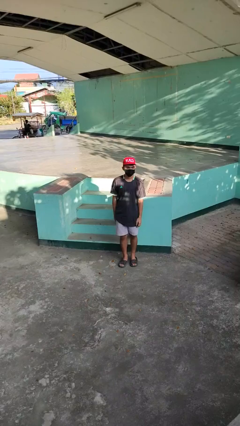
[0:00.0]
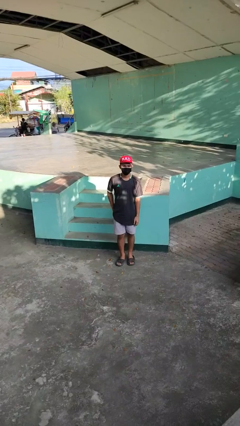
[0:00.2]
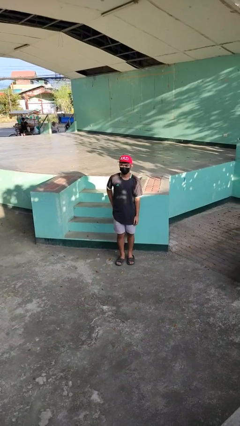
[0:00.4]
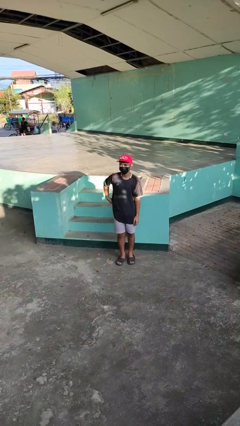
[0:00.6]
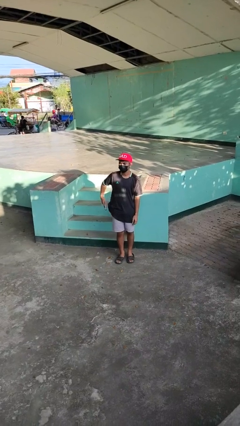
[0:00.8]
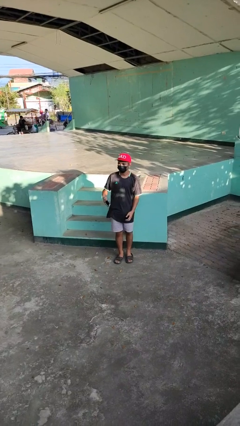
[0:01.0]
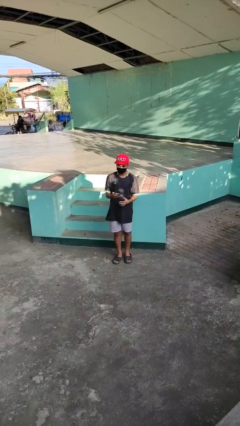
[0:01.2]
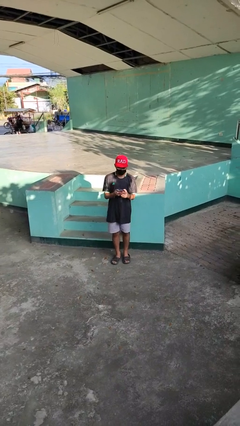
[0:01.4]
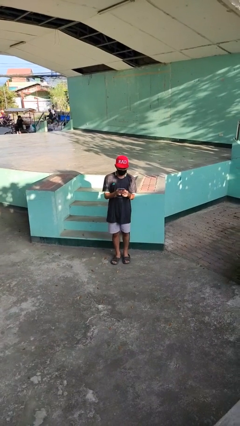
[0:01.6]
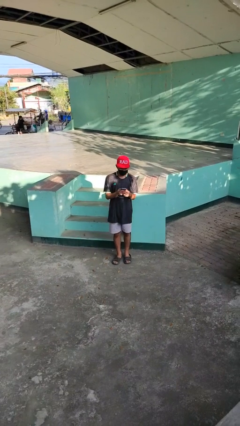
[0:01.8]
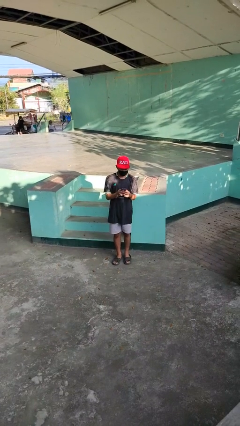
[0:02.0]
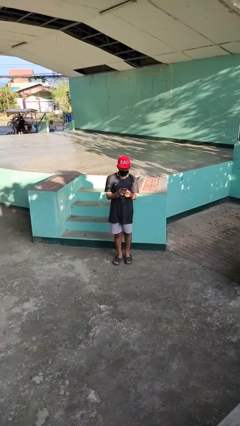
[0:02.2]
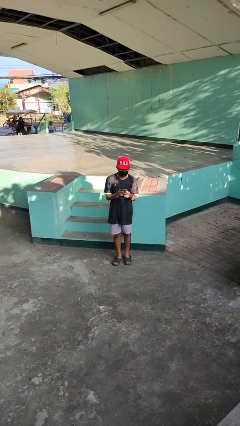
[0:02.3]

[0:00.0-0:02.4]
person takes phone from pocket

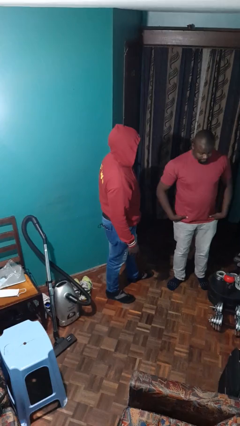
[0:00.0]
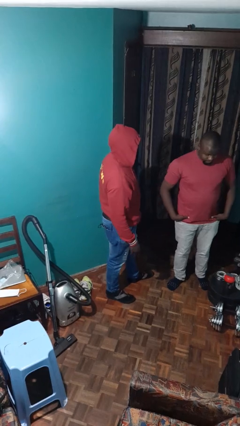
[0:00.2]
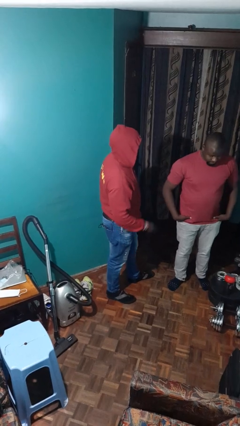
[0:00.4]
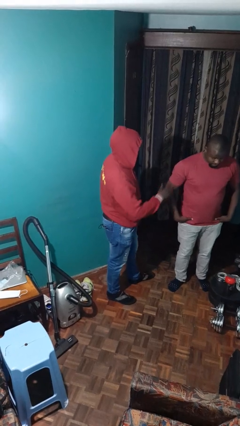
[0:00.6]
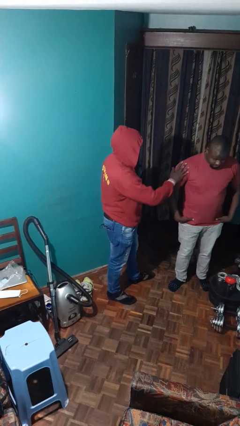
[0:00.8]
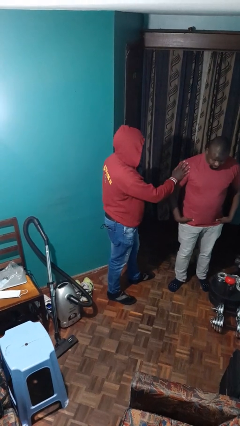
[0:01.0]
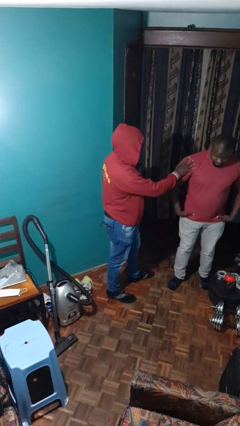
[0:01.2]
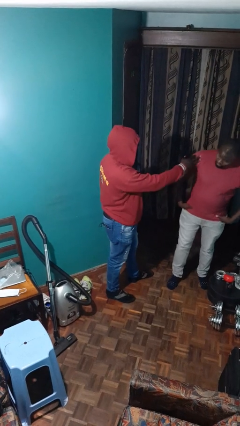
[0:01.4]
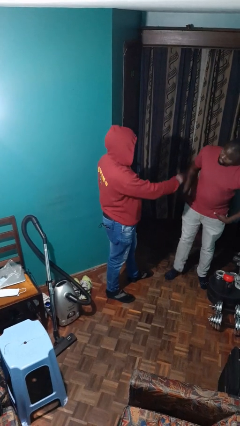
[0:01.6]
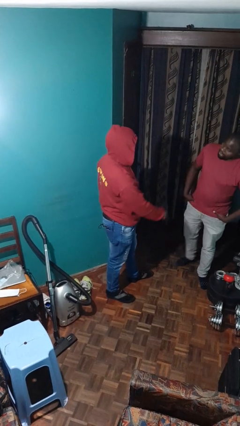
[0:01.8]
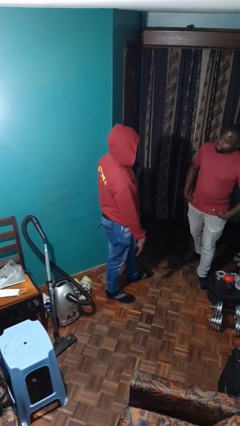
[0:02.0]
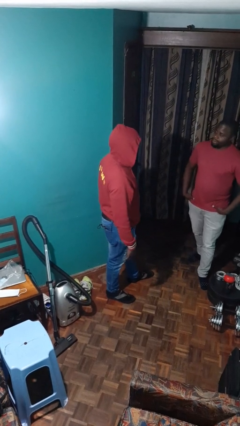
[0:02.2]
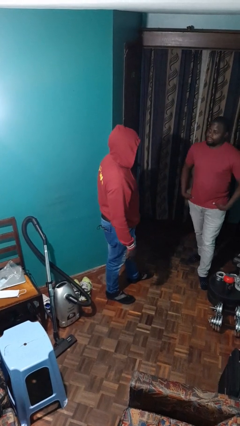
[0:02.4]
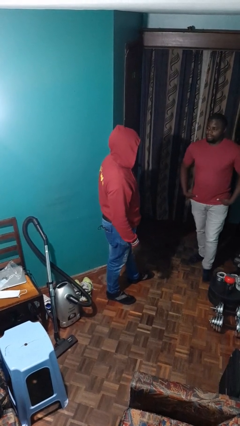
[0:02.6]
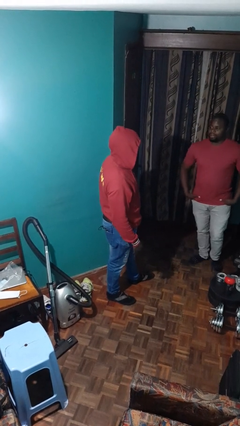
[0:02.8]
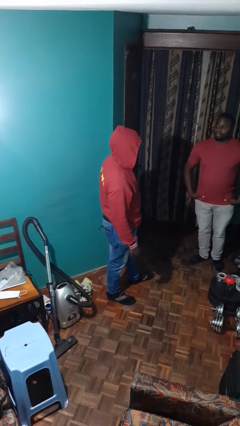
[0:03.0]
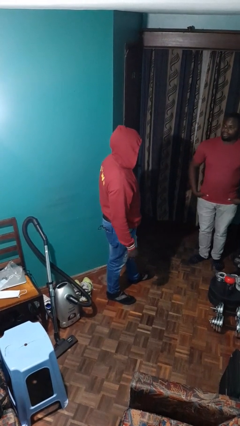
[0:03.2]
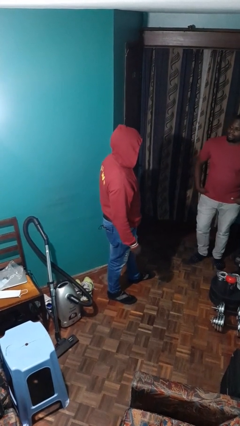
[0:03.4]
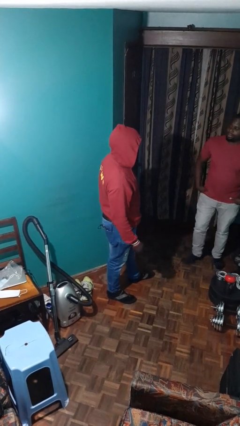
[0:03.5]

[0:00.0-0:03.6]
person shoves person

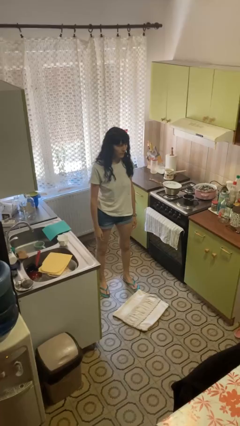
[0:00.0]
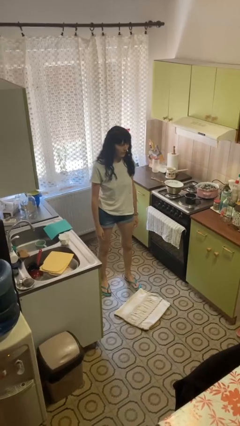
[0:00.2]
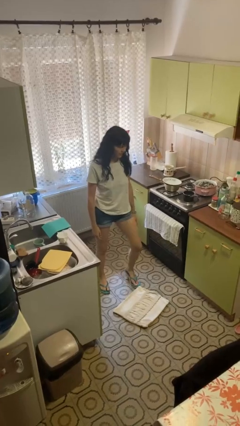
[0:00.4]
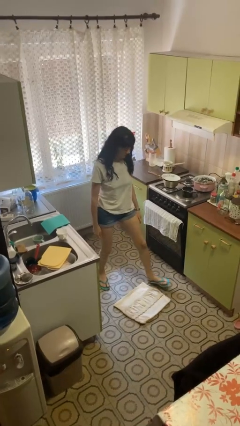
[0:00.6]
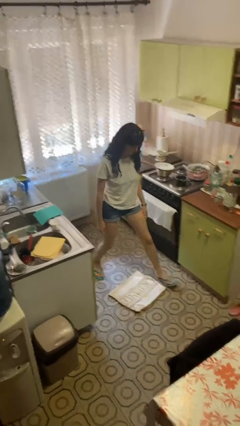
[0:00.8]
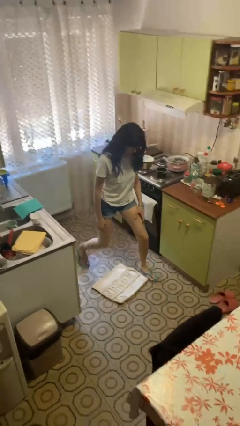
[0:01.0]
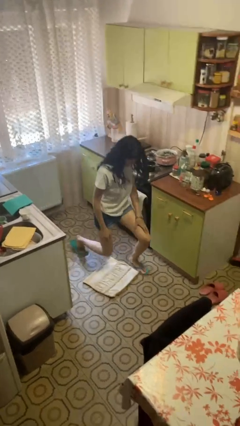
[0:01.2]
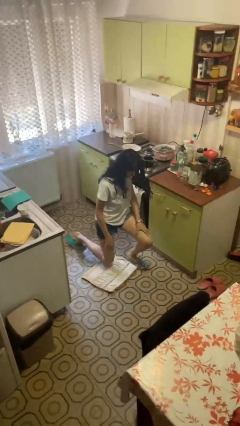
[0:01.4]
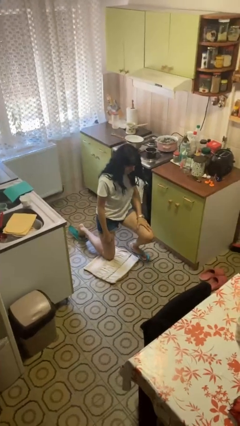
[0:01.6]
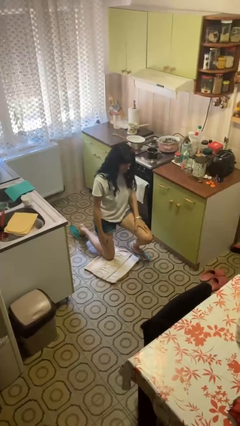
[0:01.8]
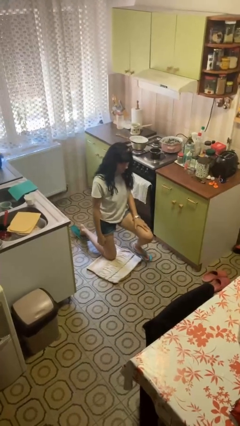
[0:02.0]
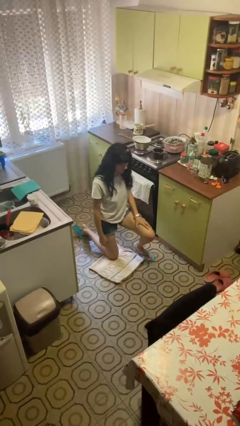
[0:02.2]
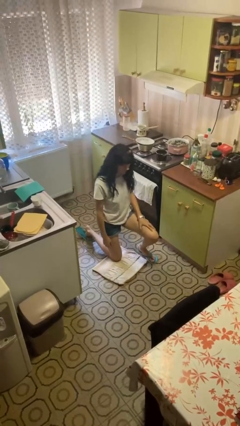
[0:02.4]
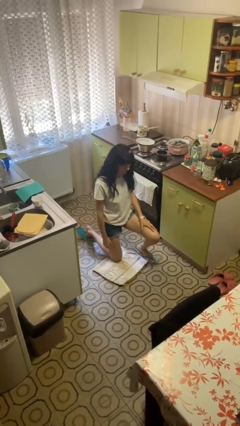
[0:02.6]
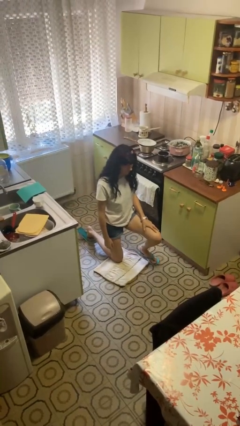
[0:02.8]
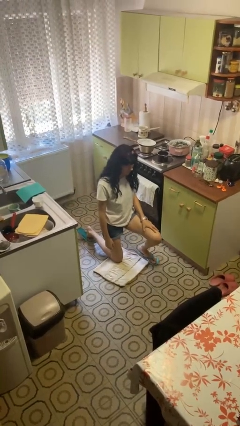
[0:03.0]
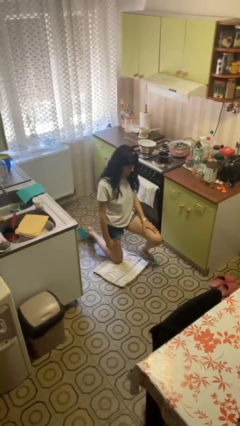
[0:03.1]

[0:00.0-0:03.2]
person kneels

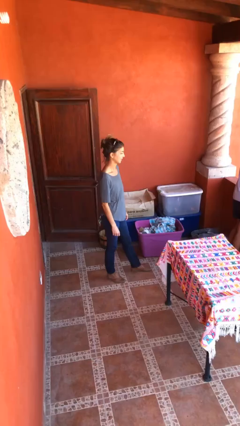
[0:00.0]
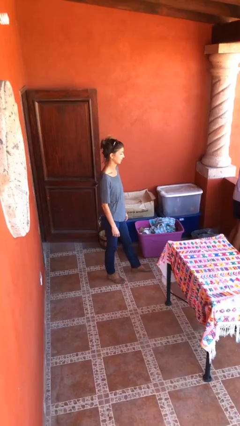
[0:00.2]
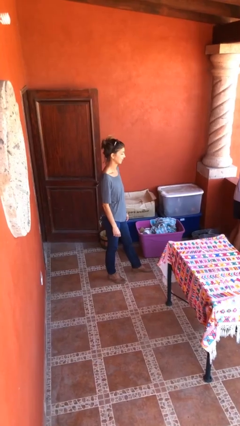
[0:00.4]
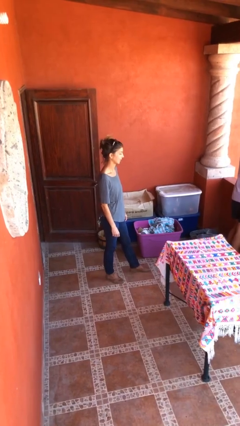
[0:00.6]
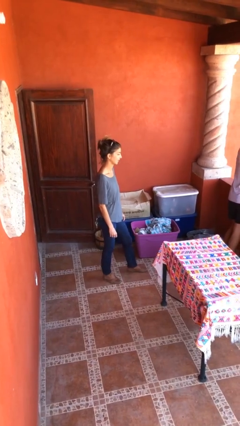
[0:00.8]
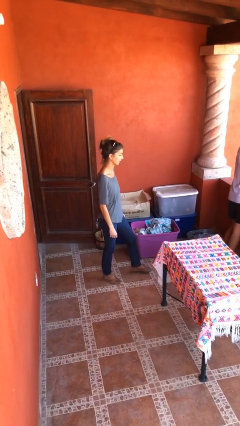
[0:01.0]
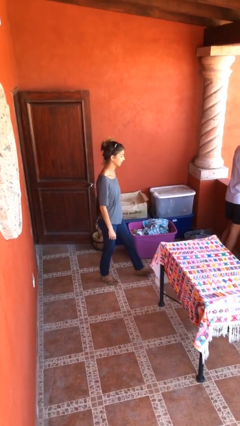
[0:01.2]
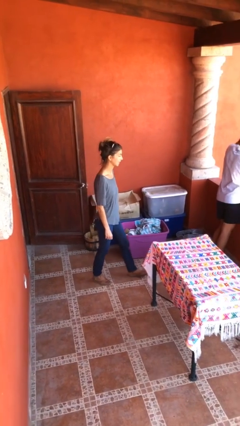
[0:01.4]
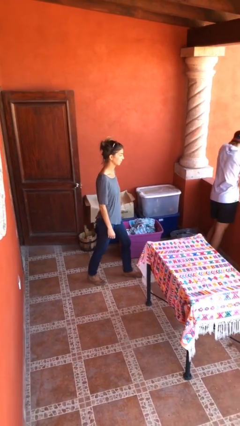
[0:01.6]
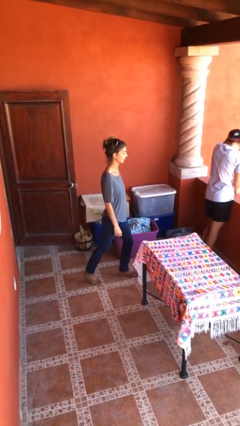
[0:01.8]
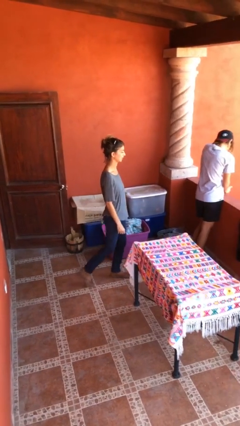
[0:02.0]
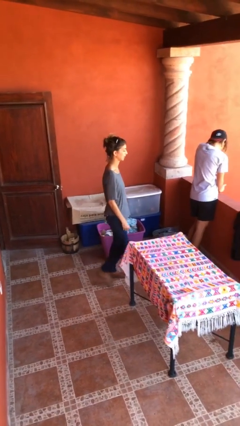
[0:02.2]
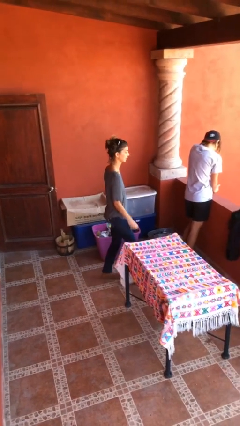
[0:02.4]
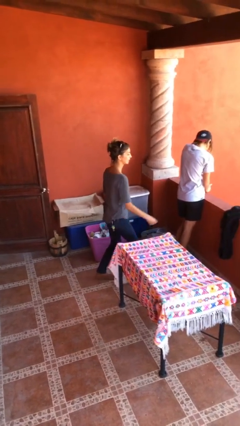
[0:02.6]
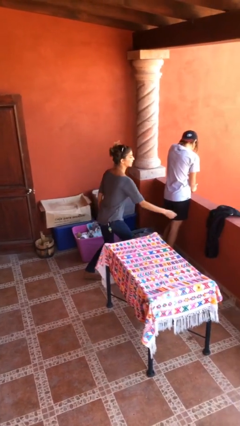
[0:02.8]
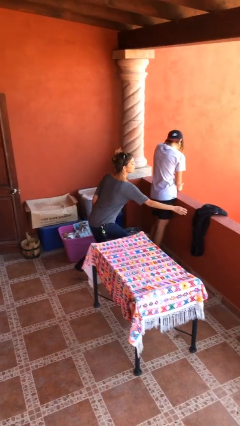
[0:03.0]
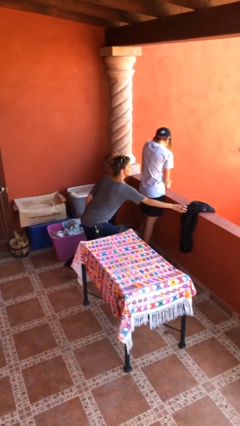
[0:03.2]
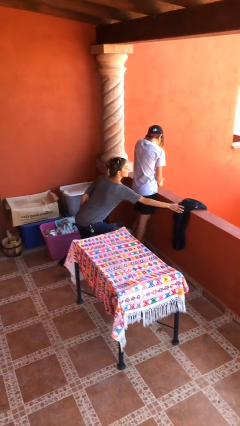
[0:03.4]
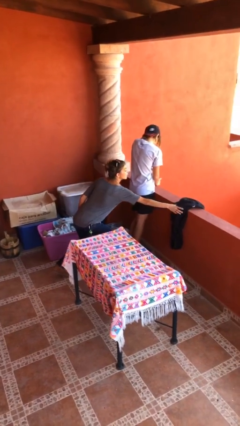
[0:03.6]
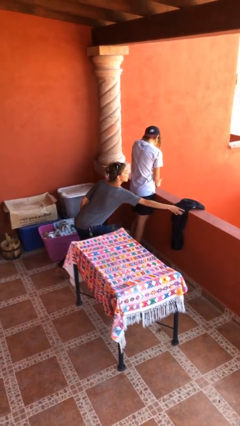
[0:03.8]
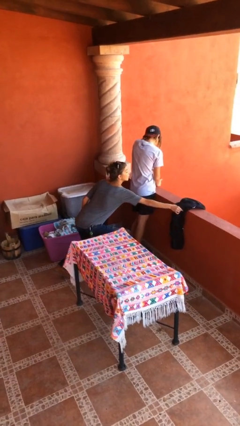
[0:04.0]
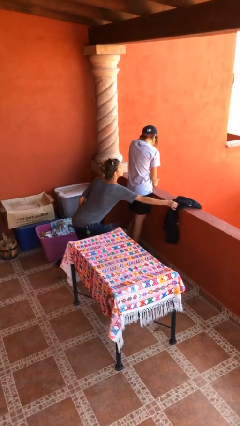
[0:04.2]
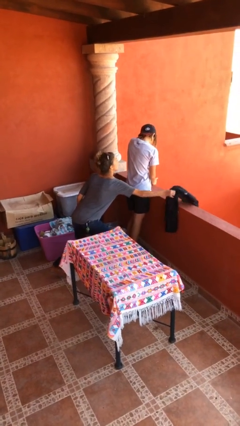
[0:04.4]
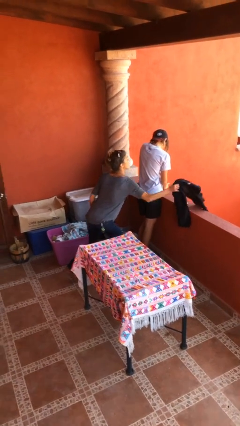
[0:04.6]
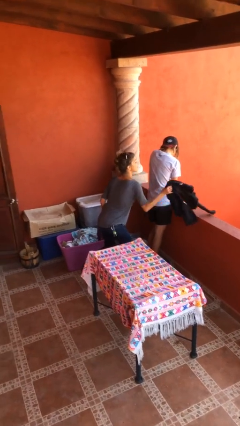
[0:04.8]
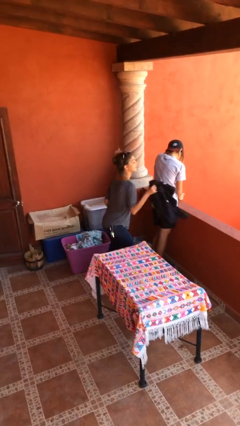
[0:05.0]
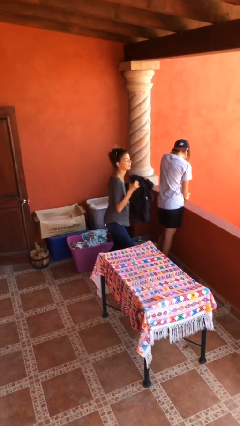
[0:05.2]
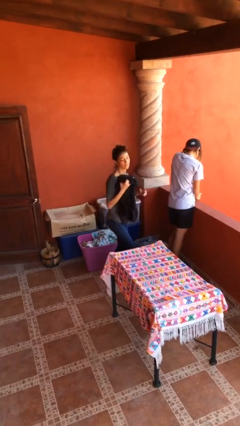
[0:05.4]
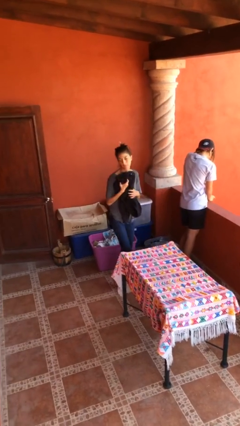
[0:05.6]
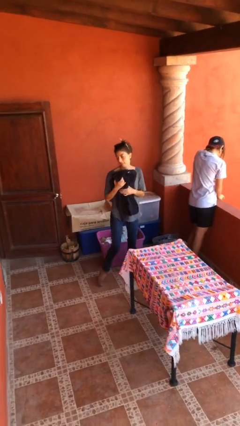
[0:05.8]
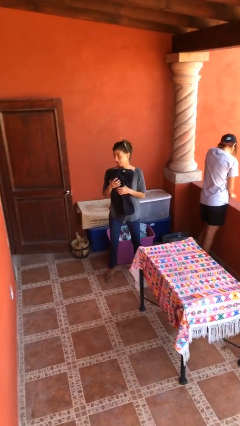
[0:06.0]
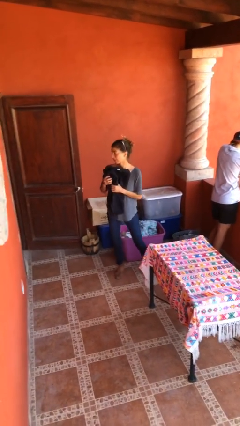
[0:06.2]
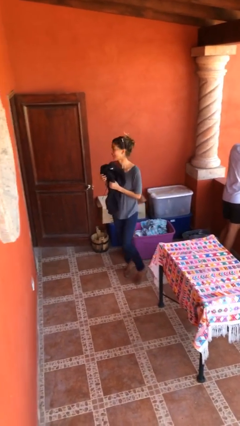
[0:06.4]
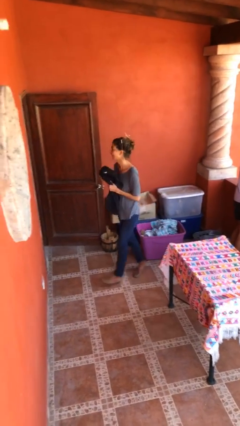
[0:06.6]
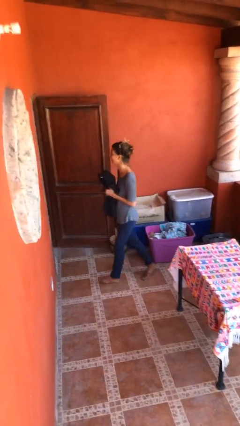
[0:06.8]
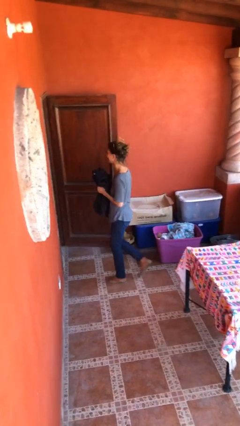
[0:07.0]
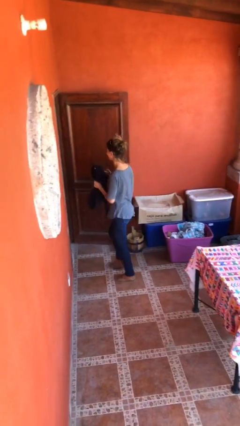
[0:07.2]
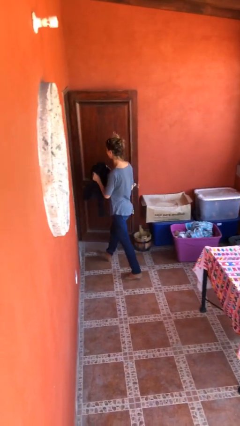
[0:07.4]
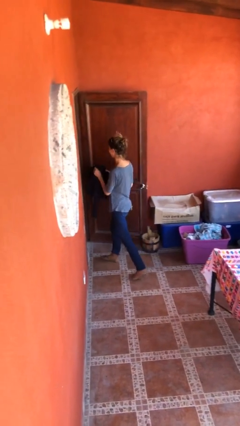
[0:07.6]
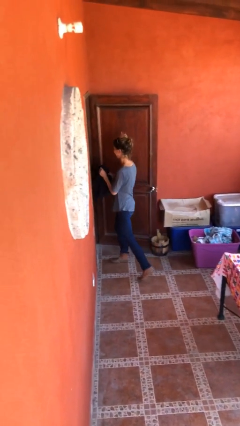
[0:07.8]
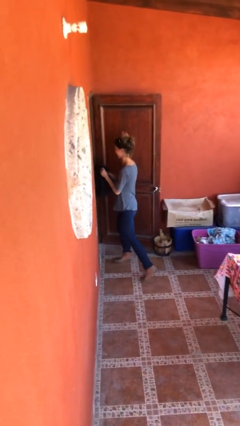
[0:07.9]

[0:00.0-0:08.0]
person steals object from person

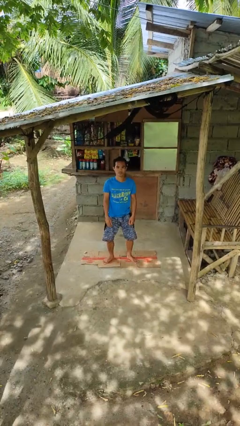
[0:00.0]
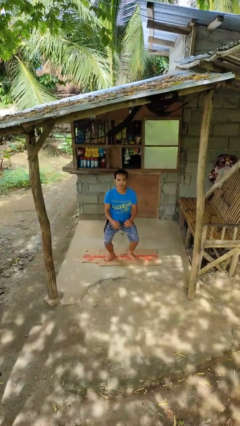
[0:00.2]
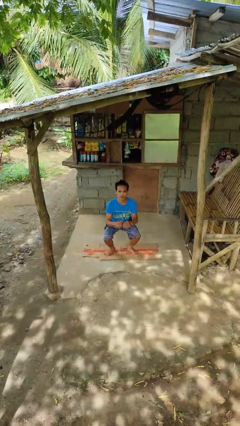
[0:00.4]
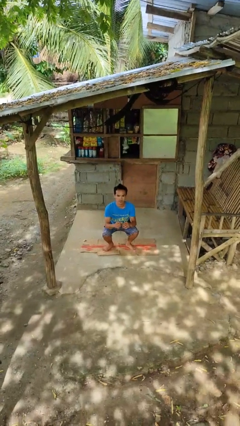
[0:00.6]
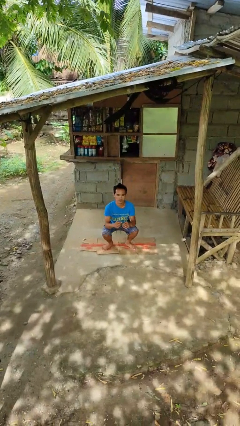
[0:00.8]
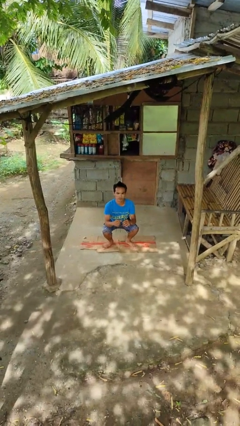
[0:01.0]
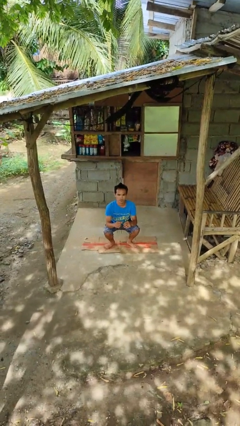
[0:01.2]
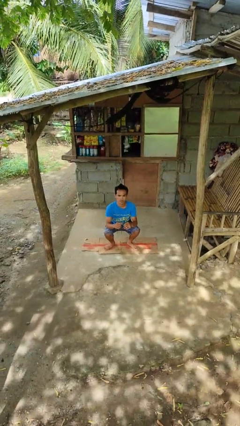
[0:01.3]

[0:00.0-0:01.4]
person squats
